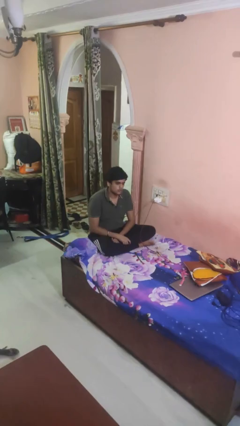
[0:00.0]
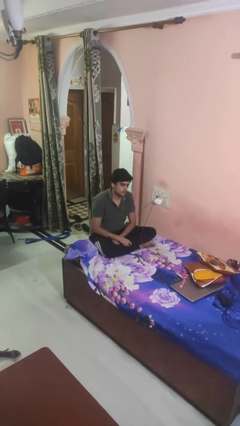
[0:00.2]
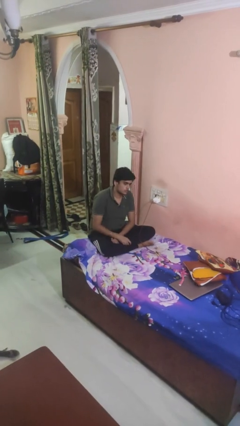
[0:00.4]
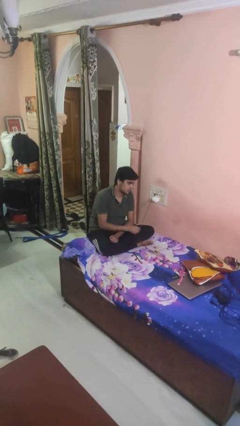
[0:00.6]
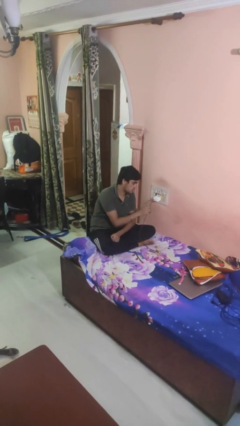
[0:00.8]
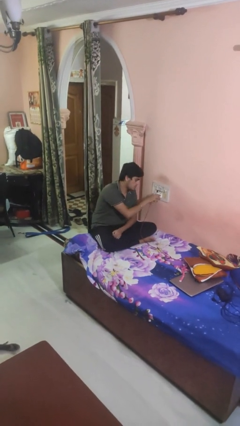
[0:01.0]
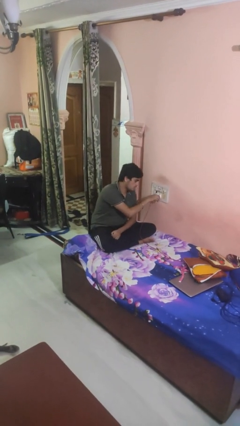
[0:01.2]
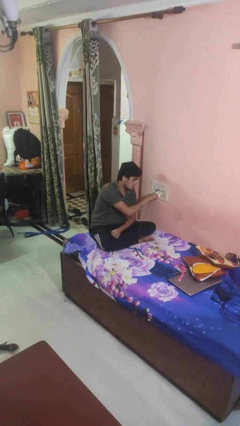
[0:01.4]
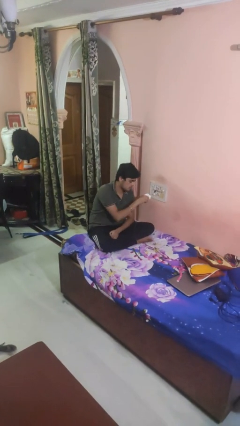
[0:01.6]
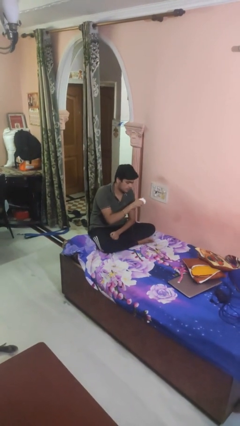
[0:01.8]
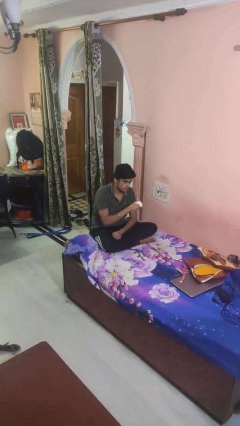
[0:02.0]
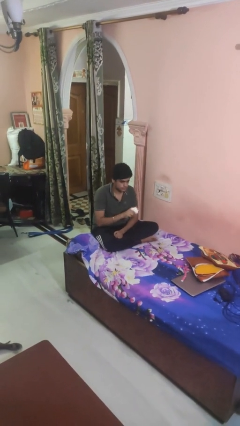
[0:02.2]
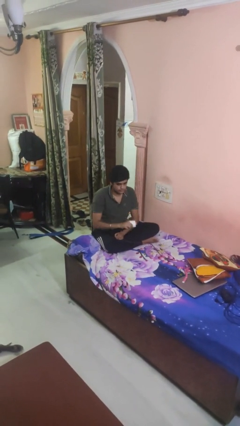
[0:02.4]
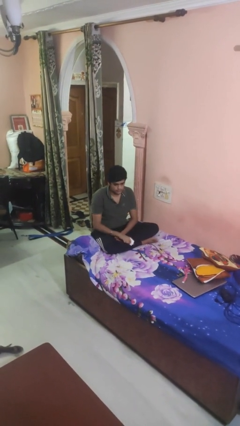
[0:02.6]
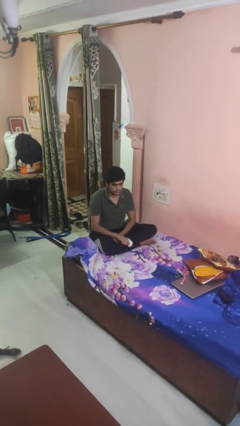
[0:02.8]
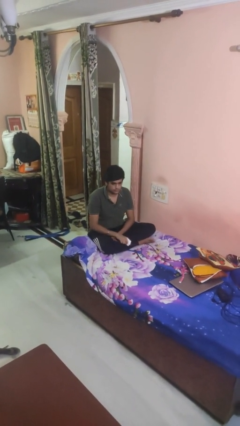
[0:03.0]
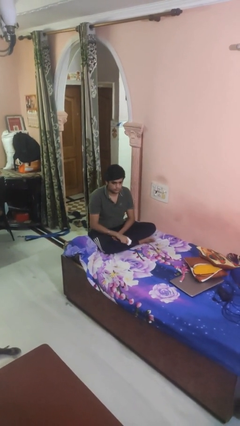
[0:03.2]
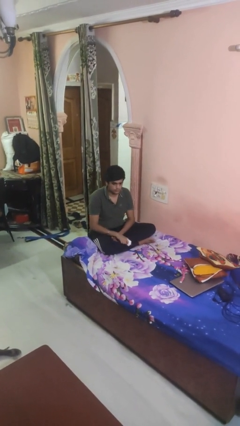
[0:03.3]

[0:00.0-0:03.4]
person unplugs from electrical socket

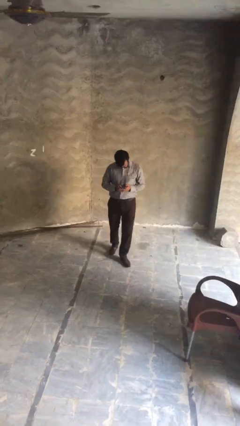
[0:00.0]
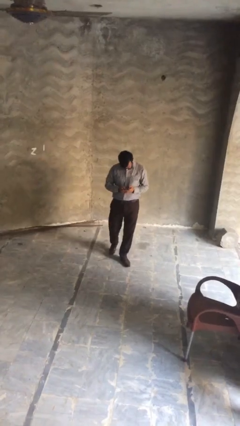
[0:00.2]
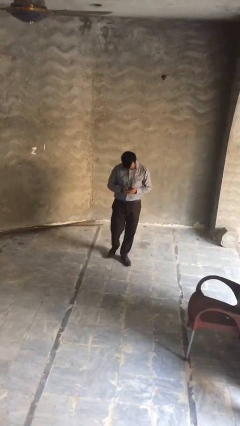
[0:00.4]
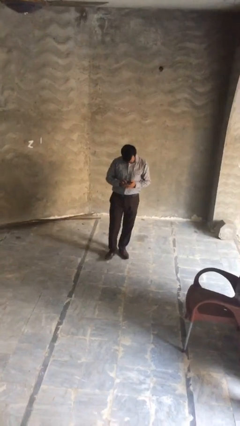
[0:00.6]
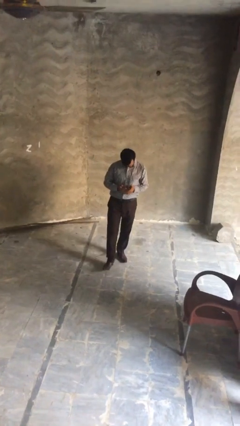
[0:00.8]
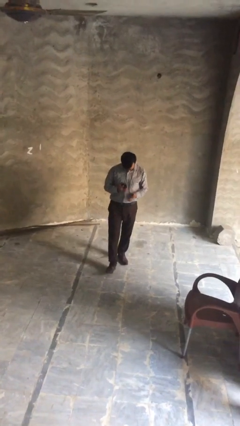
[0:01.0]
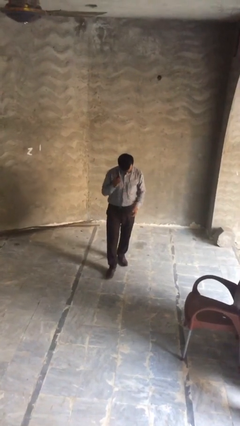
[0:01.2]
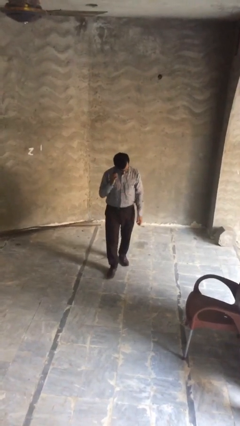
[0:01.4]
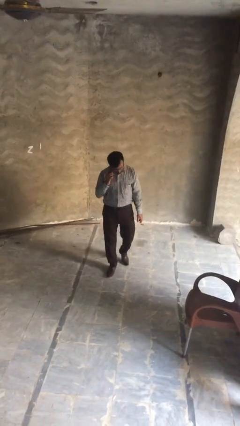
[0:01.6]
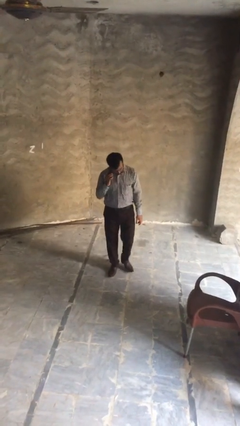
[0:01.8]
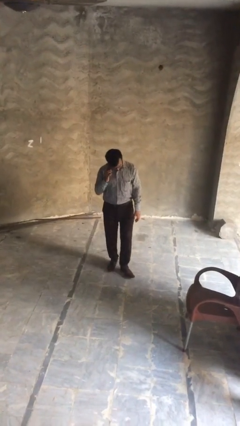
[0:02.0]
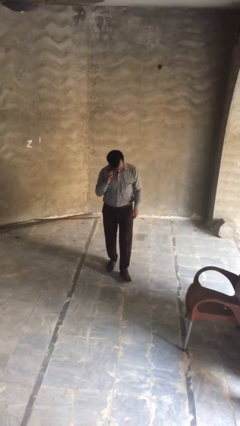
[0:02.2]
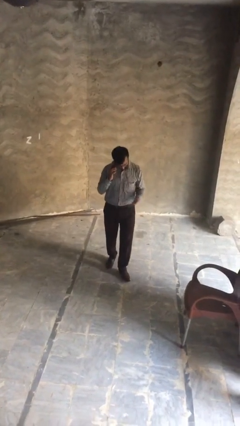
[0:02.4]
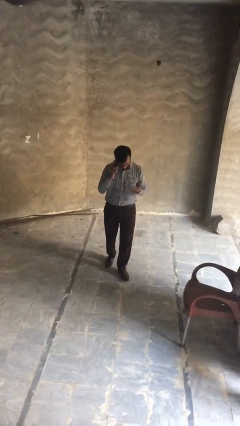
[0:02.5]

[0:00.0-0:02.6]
person talks on phone

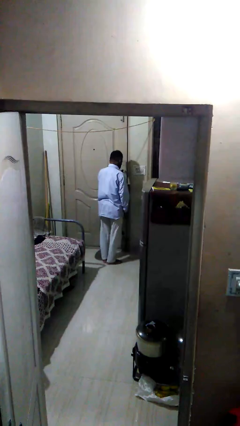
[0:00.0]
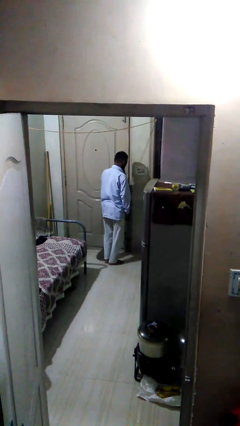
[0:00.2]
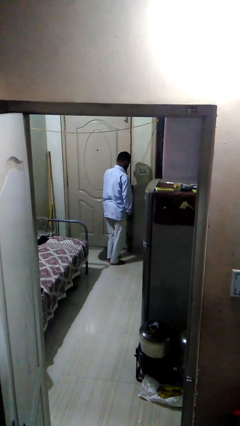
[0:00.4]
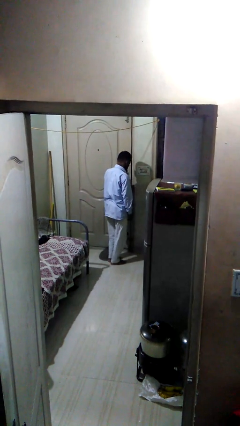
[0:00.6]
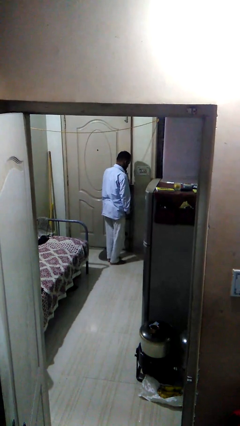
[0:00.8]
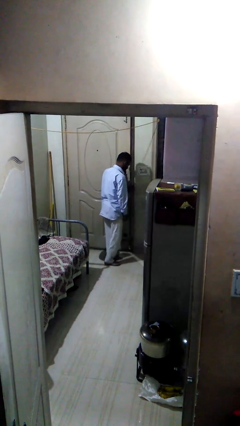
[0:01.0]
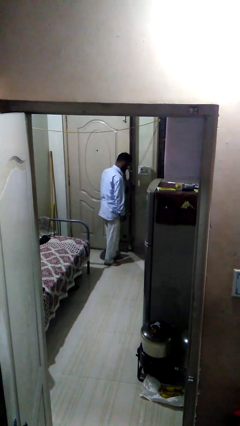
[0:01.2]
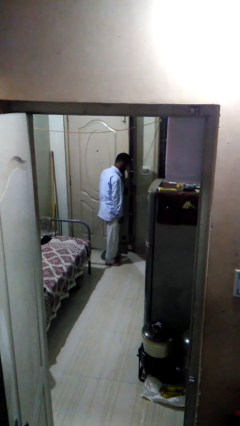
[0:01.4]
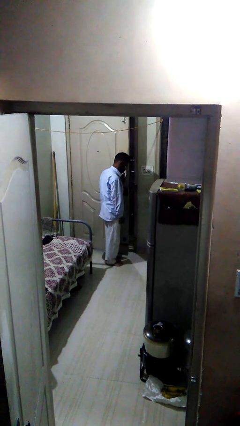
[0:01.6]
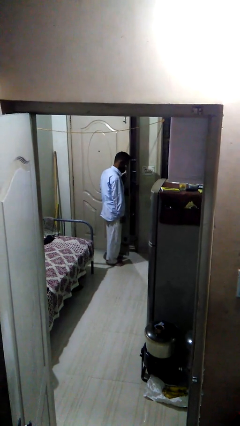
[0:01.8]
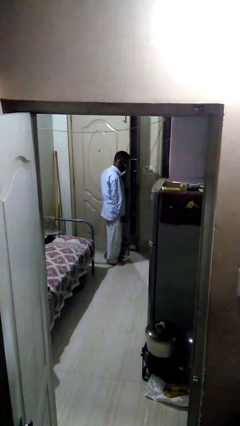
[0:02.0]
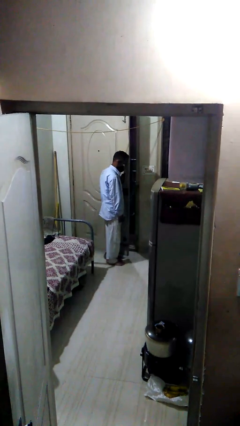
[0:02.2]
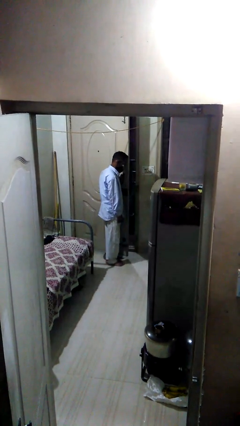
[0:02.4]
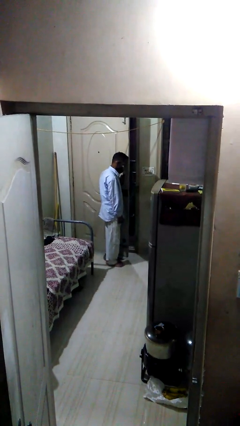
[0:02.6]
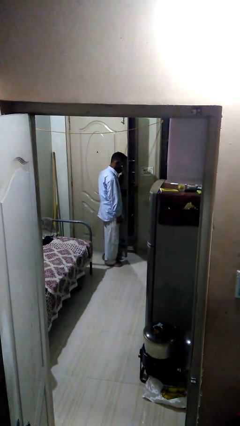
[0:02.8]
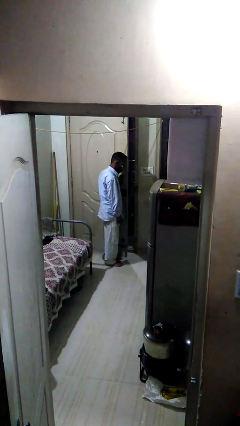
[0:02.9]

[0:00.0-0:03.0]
person opens facility door

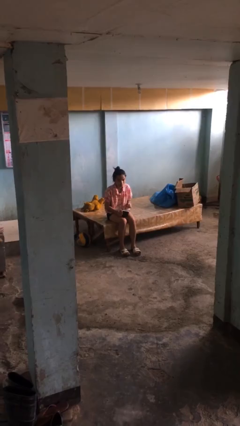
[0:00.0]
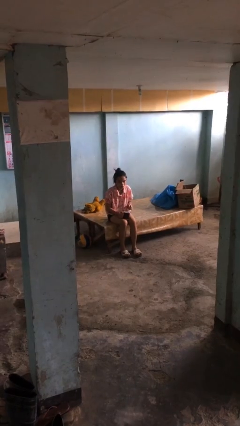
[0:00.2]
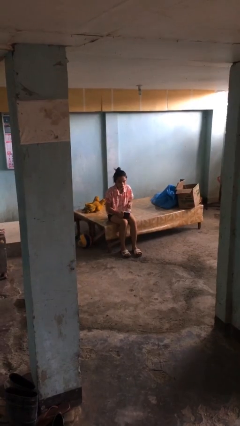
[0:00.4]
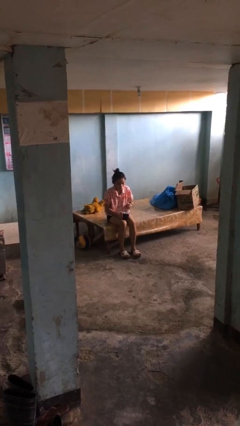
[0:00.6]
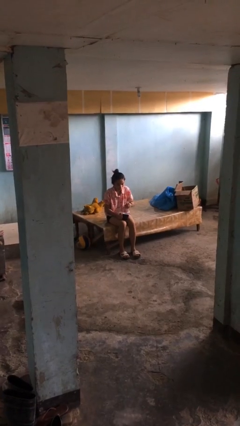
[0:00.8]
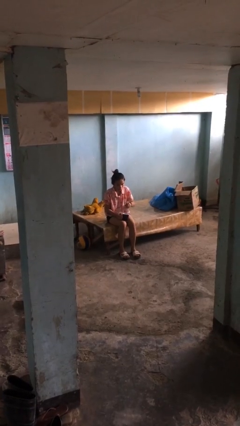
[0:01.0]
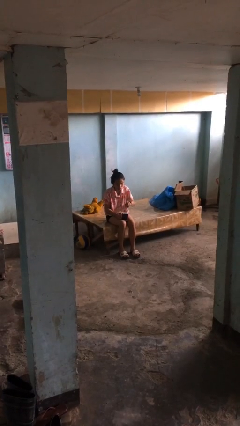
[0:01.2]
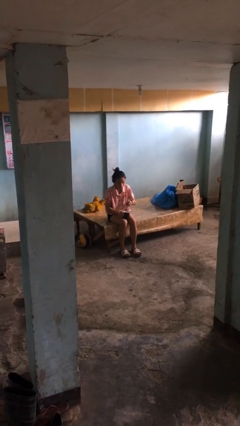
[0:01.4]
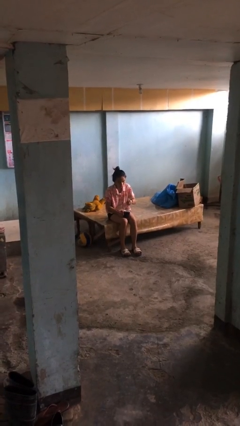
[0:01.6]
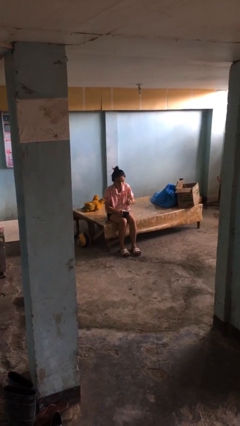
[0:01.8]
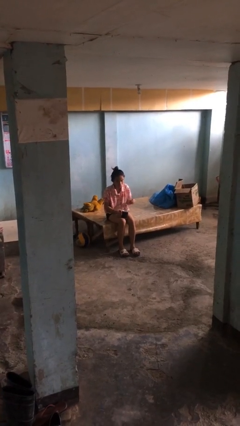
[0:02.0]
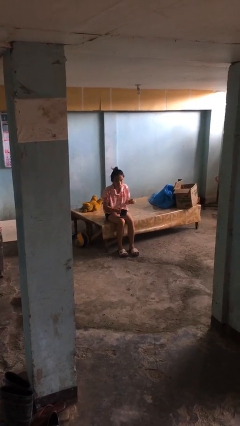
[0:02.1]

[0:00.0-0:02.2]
person stirs mug

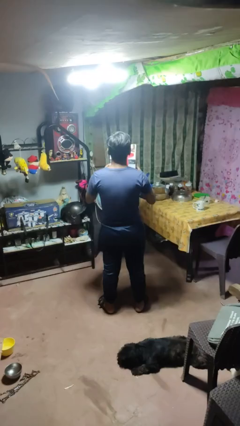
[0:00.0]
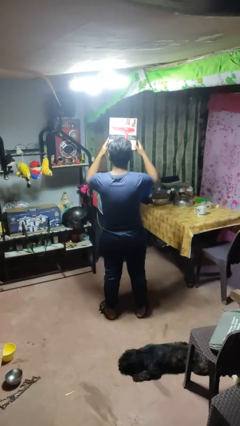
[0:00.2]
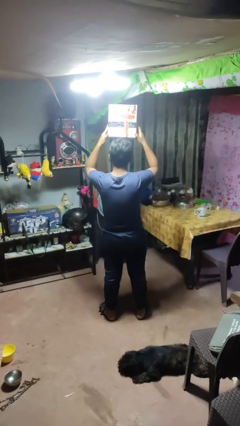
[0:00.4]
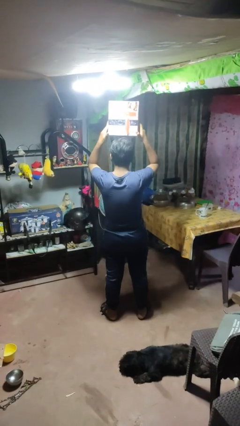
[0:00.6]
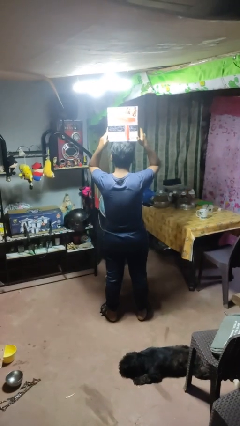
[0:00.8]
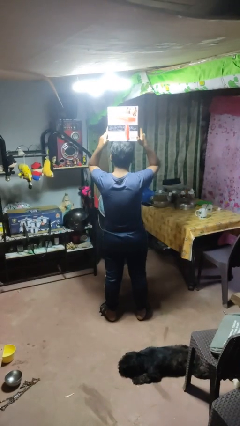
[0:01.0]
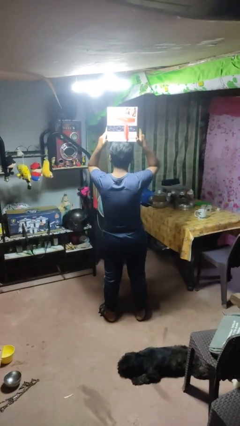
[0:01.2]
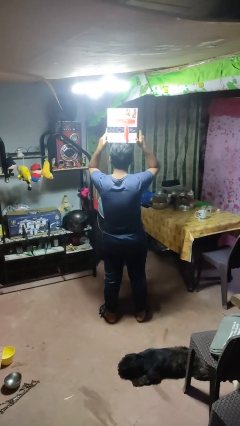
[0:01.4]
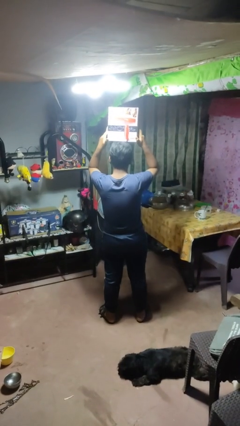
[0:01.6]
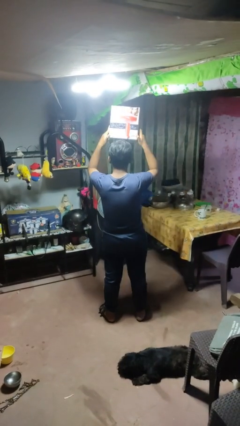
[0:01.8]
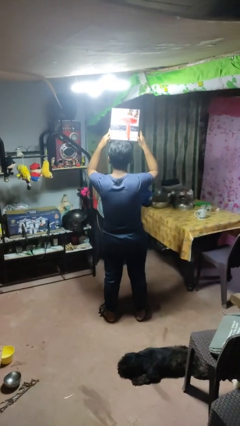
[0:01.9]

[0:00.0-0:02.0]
person holds object above head

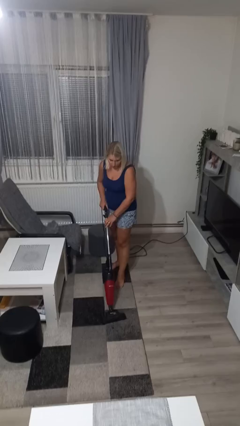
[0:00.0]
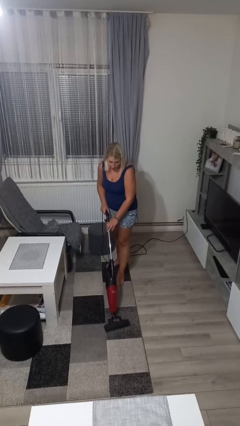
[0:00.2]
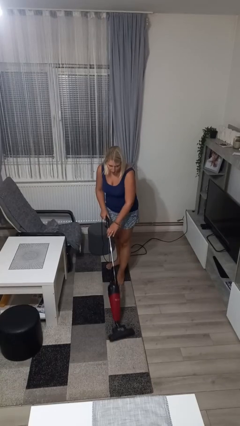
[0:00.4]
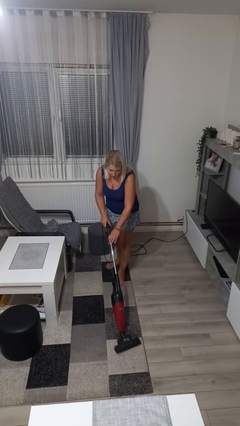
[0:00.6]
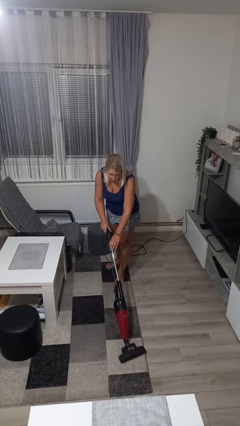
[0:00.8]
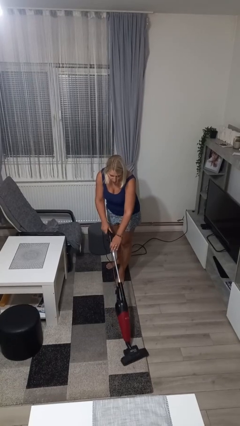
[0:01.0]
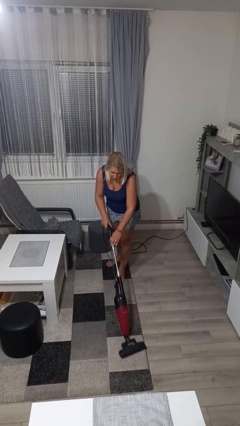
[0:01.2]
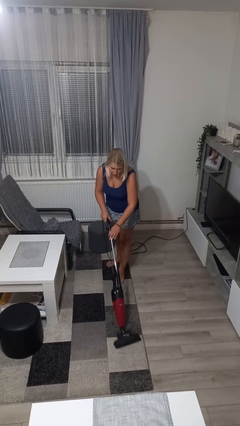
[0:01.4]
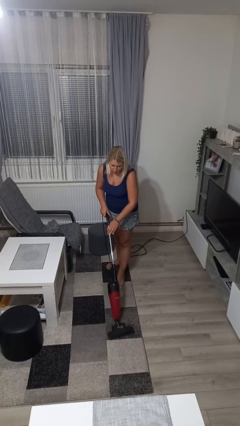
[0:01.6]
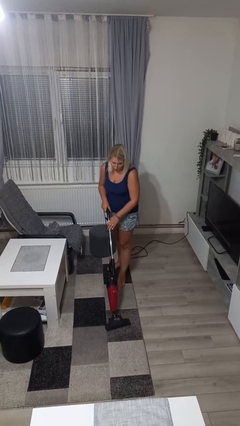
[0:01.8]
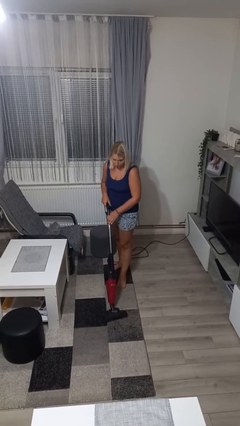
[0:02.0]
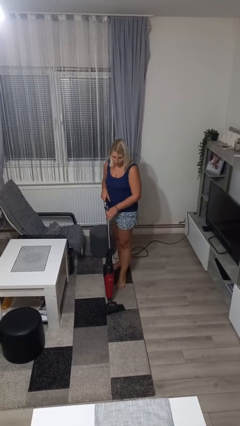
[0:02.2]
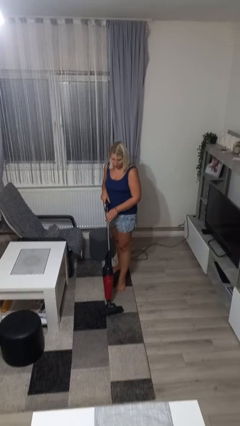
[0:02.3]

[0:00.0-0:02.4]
person vacuums carpet

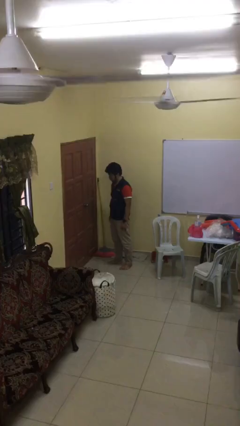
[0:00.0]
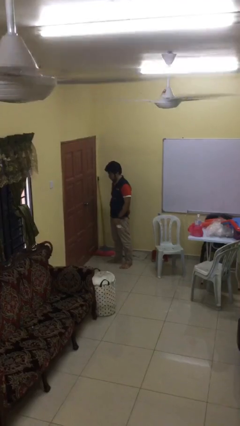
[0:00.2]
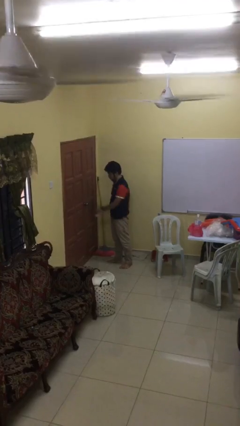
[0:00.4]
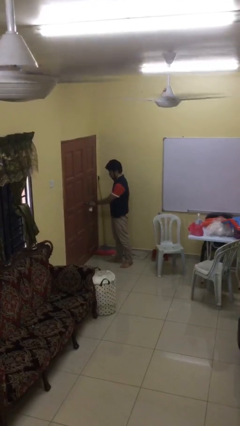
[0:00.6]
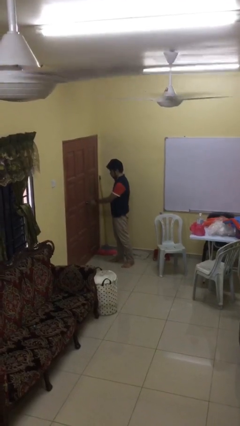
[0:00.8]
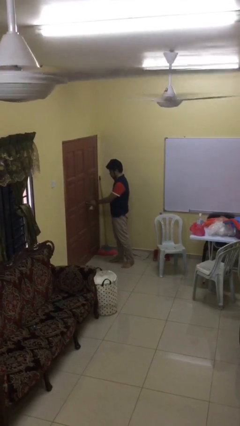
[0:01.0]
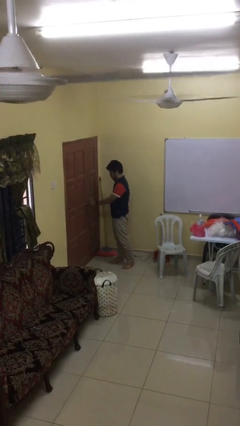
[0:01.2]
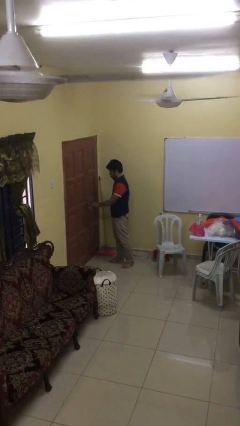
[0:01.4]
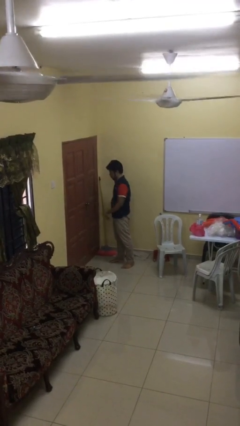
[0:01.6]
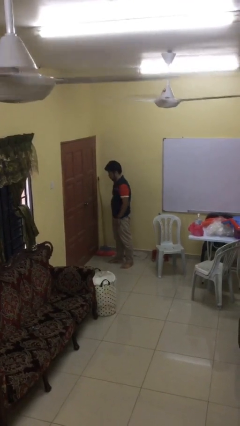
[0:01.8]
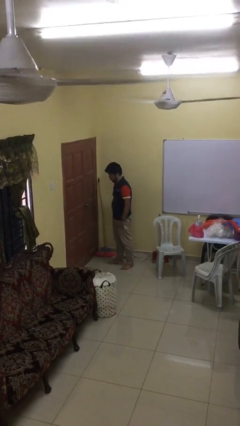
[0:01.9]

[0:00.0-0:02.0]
person locks door with keys
